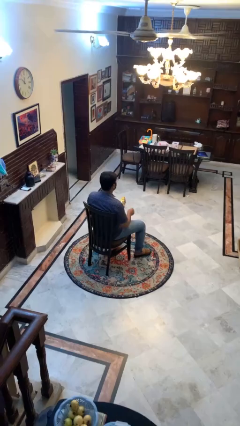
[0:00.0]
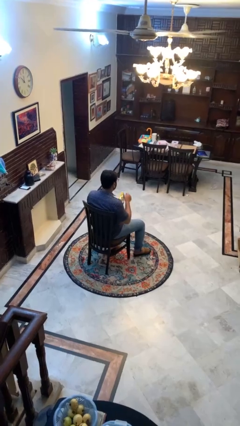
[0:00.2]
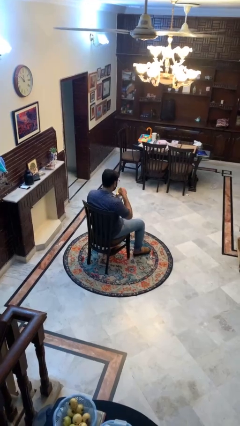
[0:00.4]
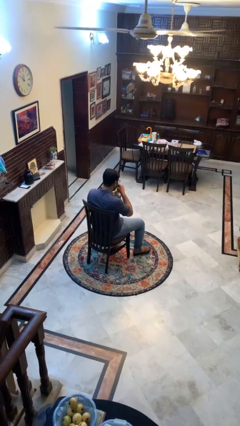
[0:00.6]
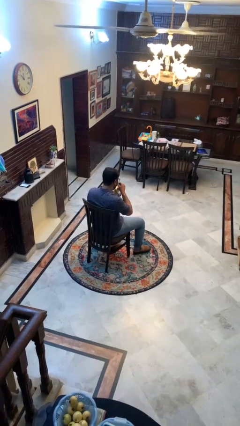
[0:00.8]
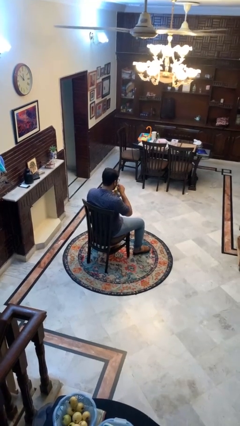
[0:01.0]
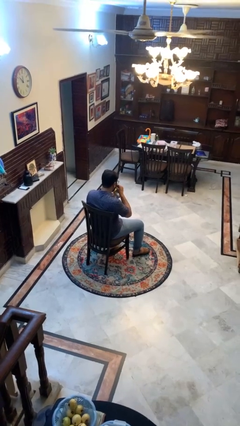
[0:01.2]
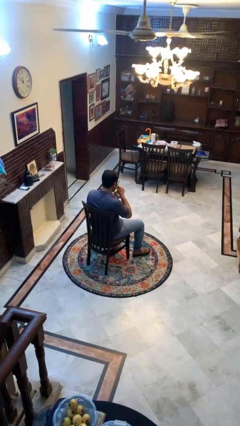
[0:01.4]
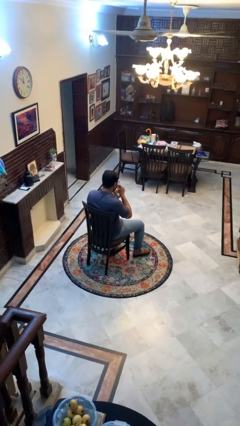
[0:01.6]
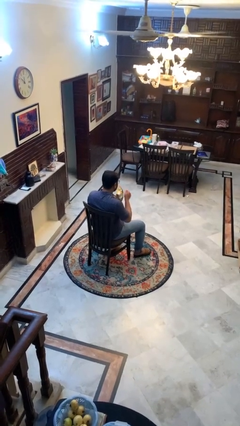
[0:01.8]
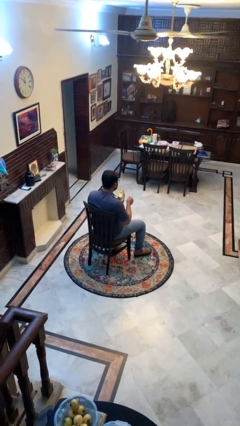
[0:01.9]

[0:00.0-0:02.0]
person eats snack from bag

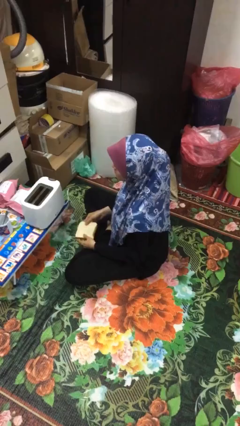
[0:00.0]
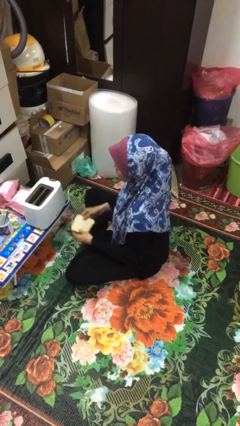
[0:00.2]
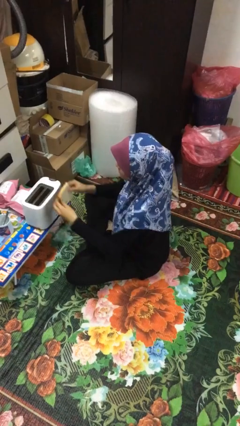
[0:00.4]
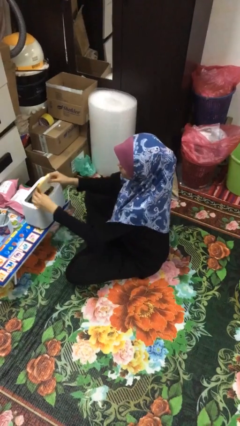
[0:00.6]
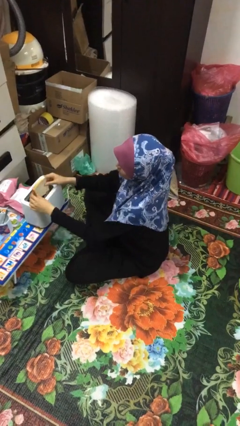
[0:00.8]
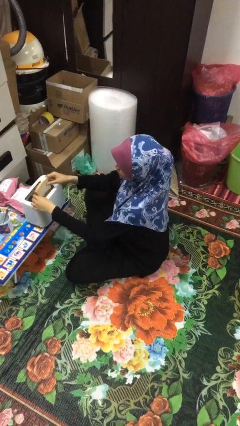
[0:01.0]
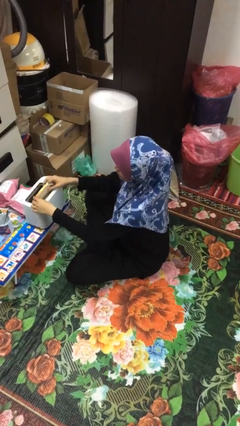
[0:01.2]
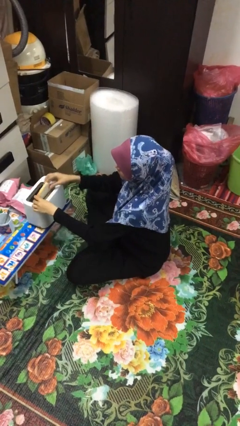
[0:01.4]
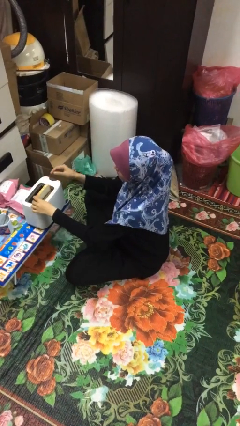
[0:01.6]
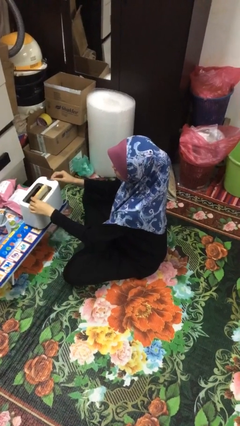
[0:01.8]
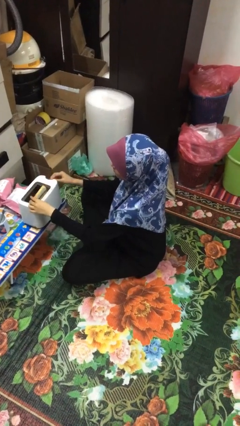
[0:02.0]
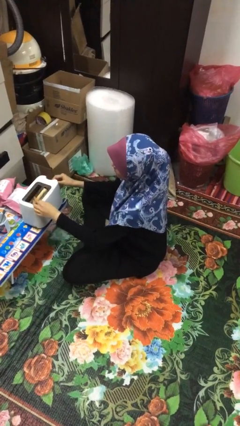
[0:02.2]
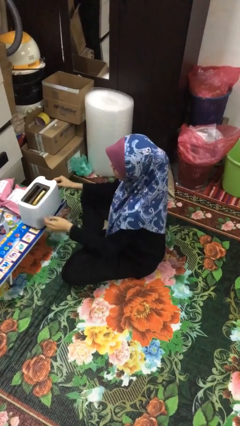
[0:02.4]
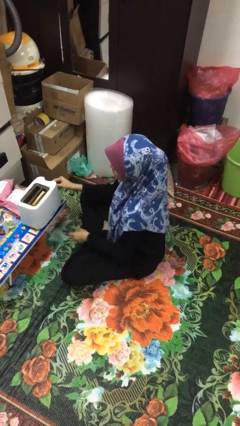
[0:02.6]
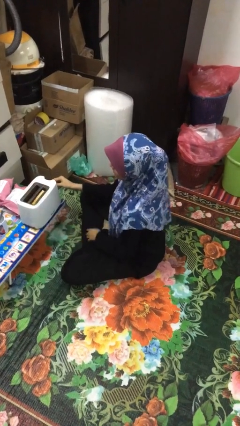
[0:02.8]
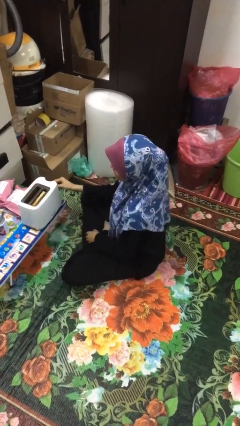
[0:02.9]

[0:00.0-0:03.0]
person puts object into toaster

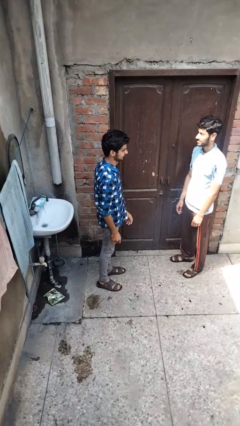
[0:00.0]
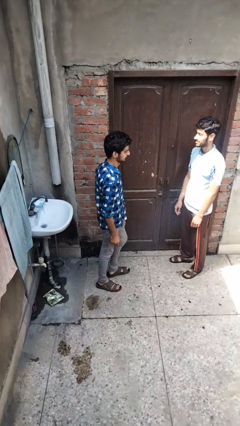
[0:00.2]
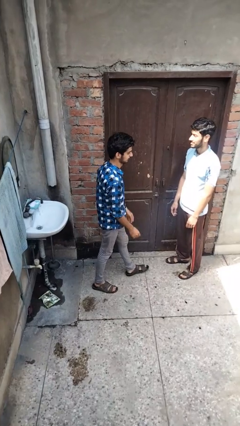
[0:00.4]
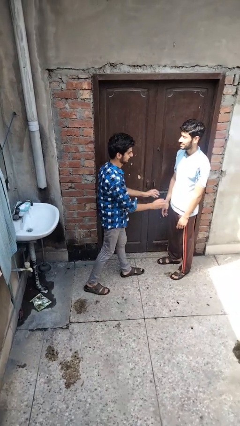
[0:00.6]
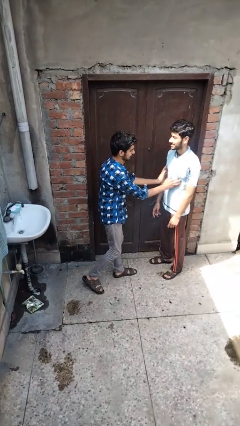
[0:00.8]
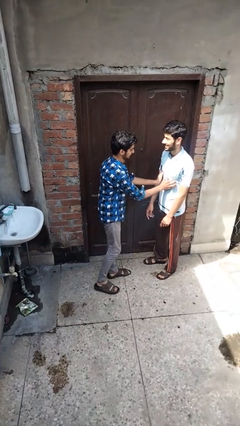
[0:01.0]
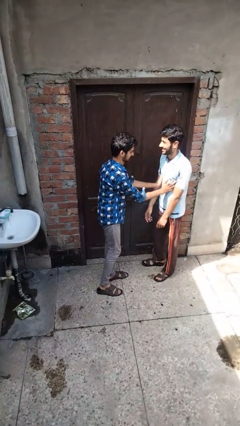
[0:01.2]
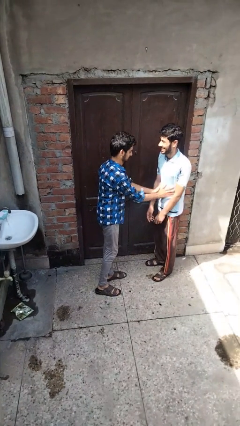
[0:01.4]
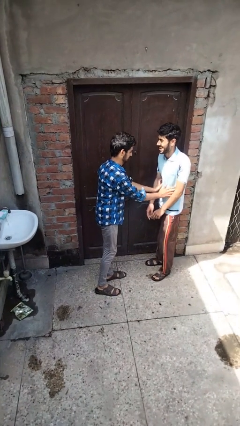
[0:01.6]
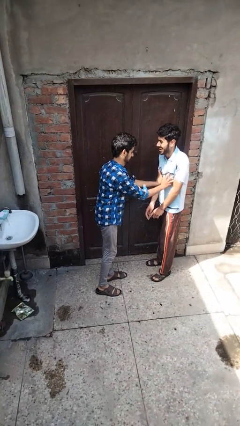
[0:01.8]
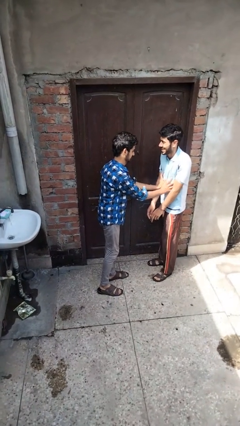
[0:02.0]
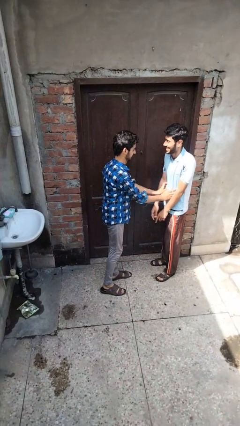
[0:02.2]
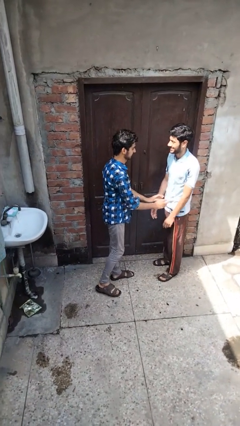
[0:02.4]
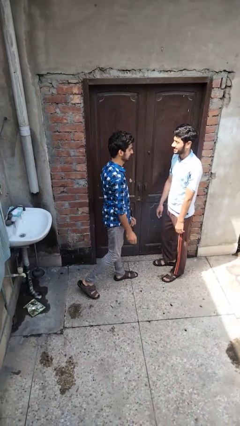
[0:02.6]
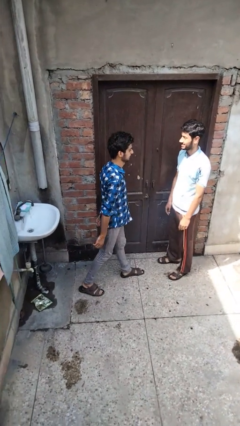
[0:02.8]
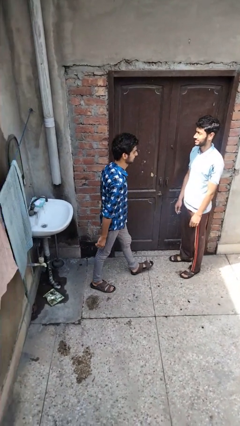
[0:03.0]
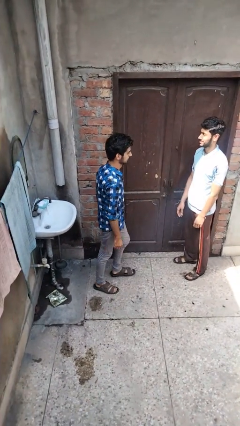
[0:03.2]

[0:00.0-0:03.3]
person tickles person

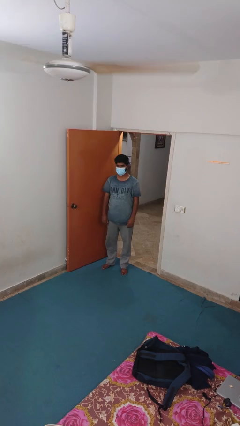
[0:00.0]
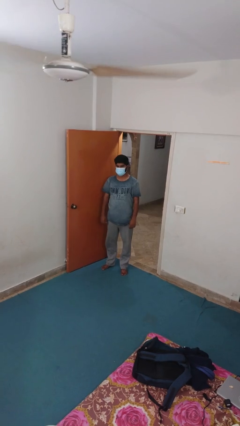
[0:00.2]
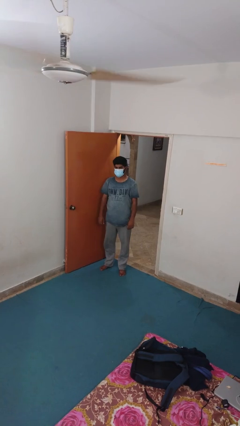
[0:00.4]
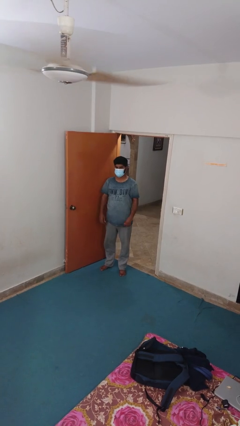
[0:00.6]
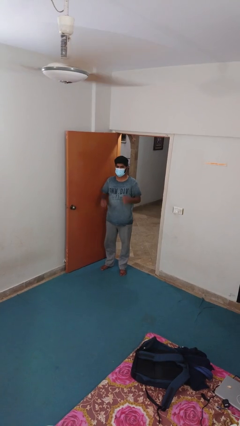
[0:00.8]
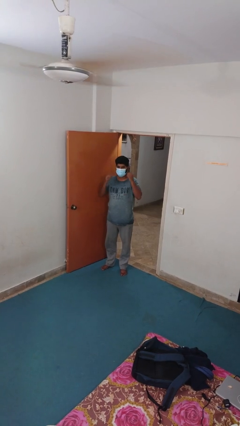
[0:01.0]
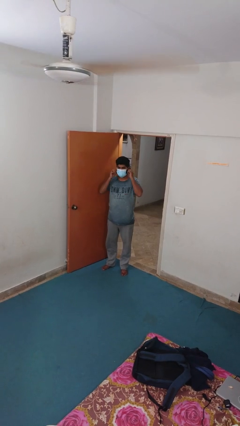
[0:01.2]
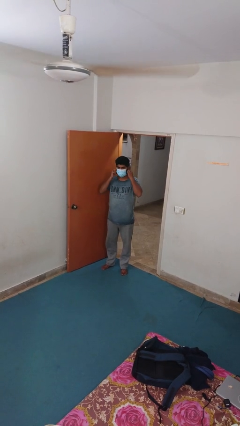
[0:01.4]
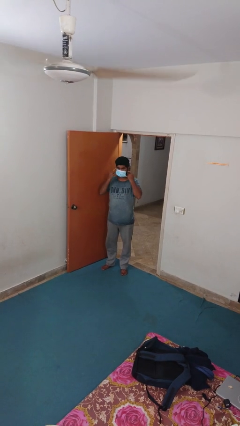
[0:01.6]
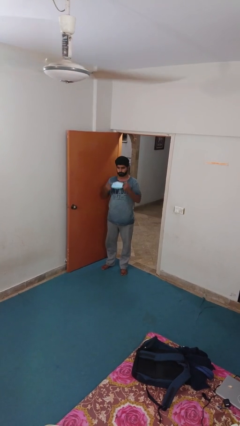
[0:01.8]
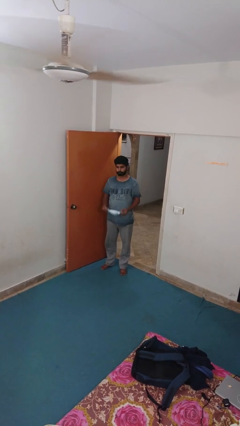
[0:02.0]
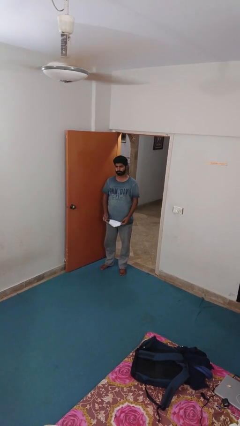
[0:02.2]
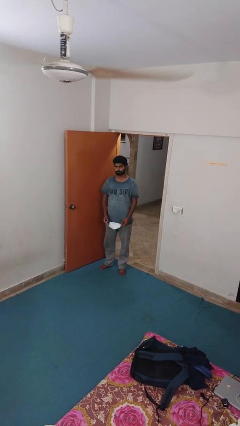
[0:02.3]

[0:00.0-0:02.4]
person takes off facemask

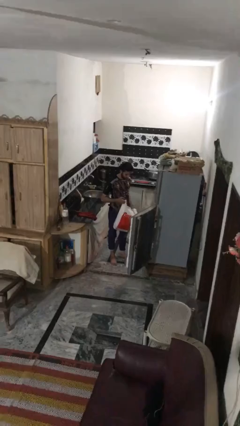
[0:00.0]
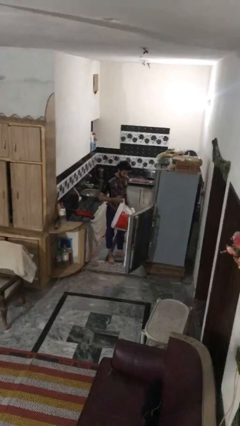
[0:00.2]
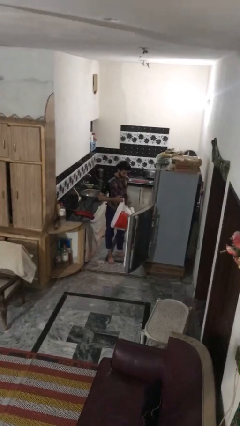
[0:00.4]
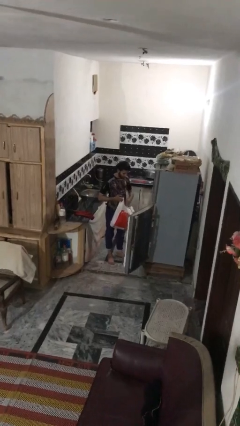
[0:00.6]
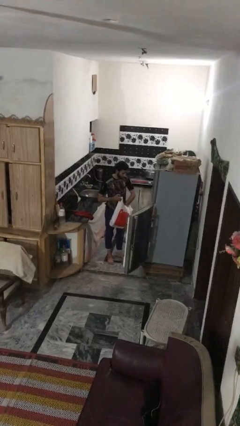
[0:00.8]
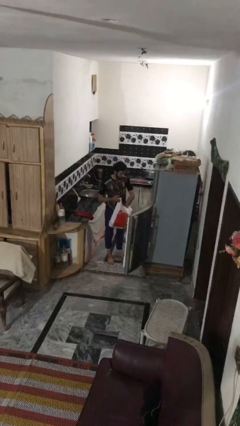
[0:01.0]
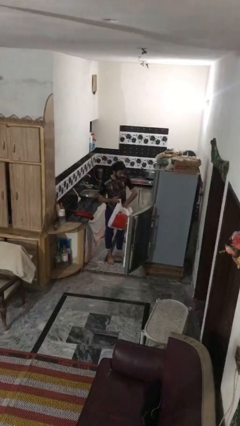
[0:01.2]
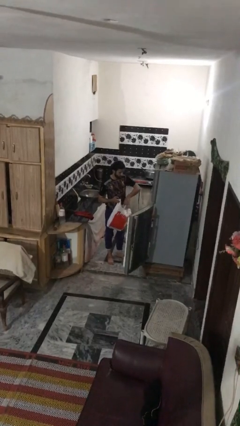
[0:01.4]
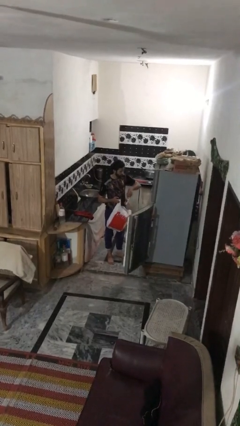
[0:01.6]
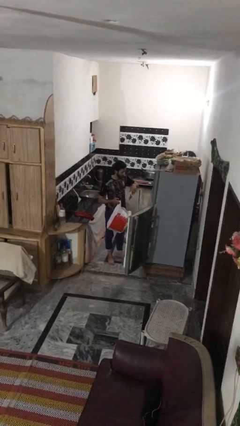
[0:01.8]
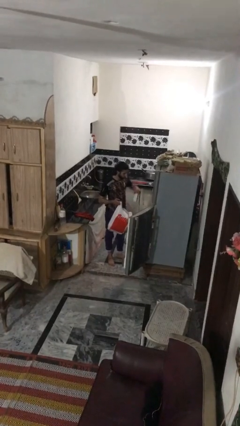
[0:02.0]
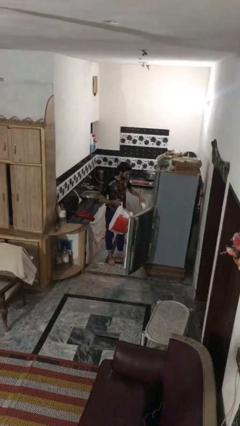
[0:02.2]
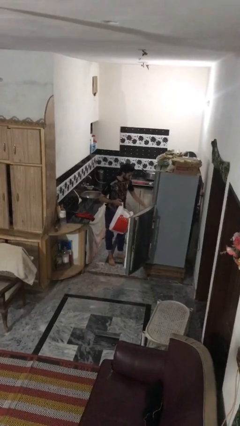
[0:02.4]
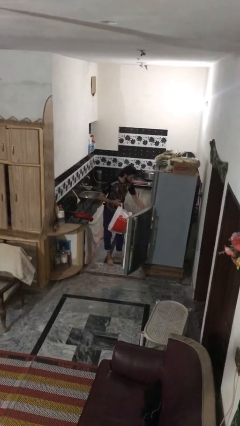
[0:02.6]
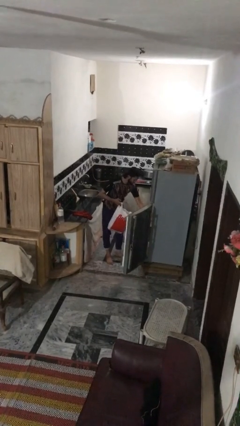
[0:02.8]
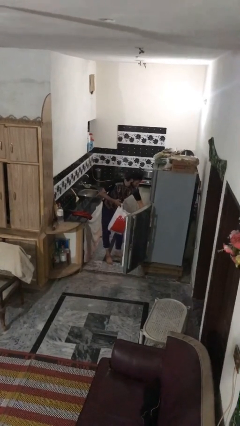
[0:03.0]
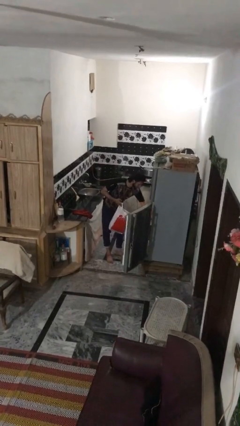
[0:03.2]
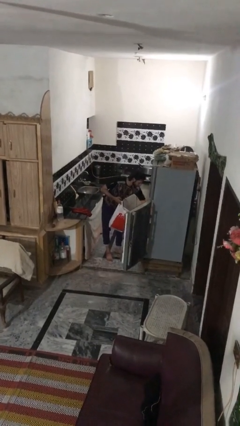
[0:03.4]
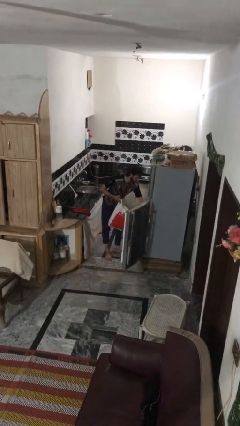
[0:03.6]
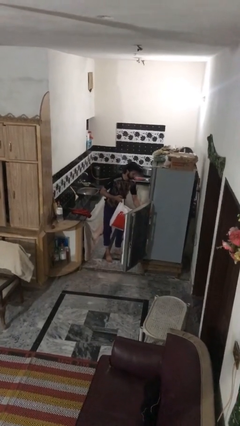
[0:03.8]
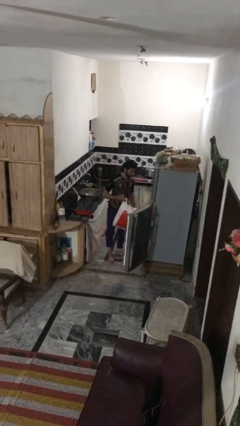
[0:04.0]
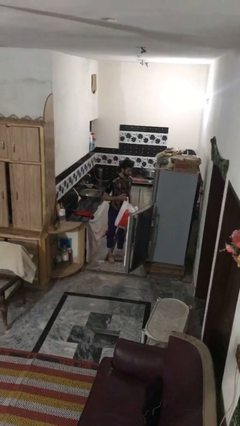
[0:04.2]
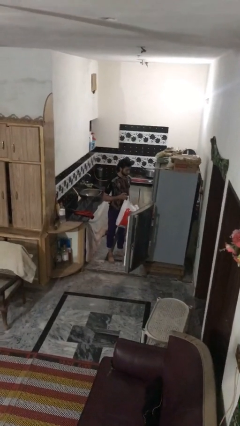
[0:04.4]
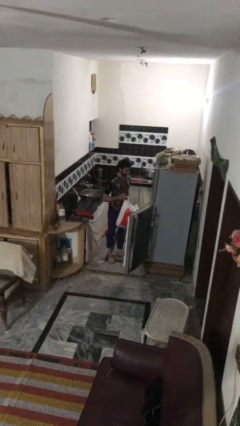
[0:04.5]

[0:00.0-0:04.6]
person loads groceries into refrigerator

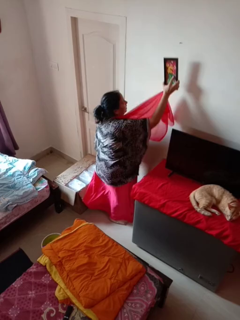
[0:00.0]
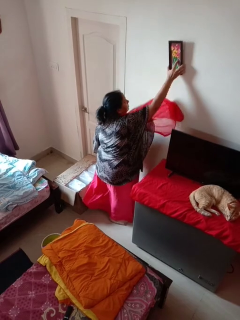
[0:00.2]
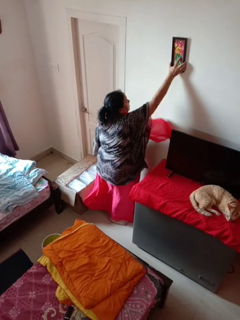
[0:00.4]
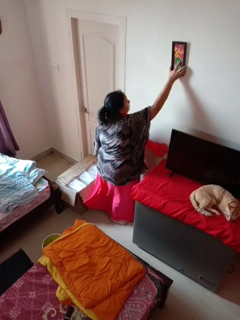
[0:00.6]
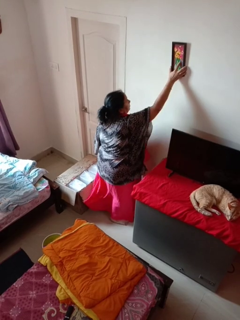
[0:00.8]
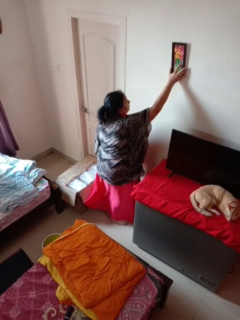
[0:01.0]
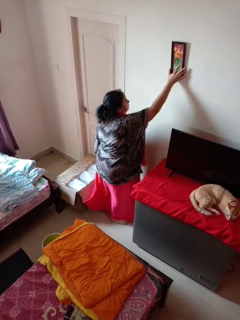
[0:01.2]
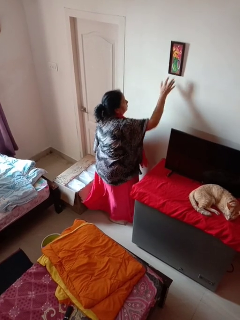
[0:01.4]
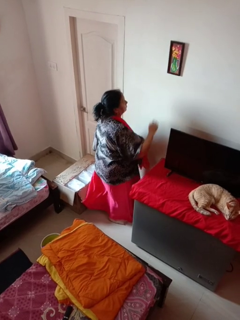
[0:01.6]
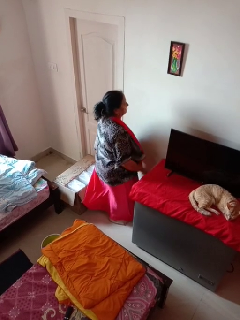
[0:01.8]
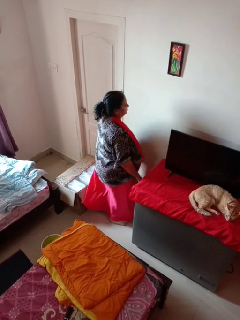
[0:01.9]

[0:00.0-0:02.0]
person puts up picture frame

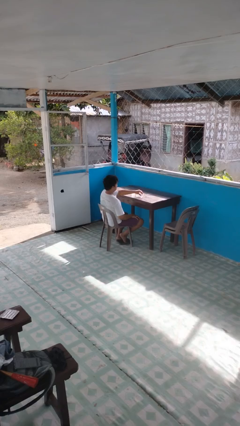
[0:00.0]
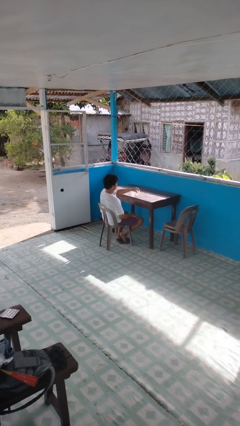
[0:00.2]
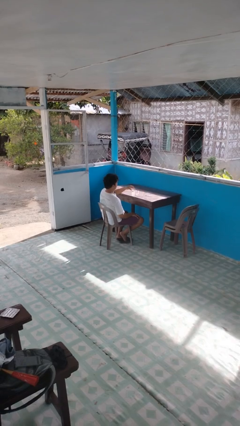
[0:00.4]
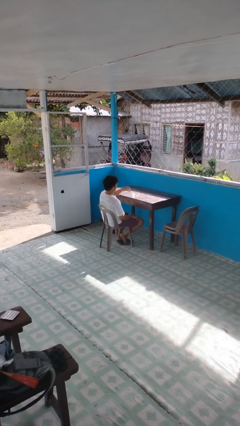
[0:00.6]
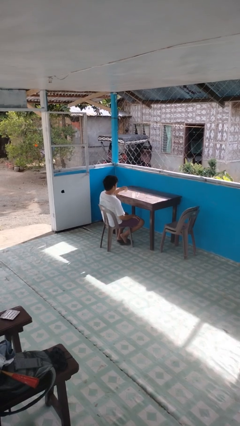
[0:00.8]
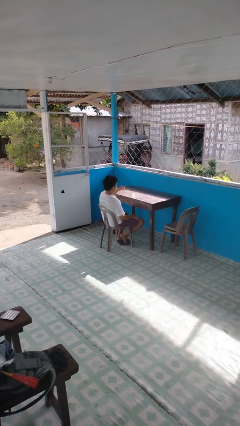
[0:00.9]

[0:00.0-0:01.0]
person picks up object from table
